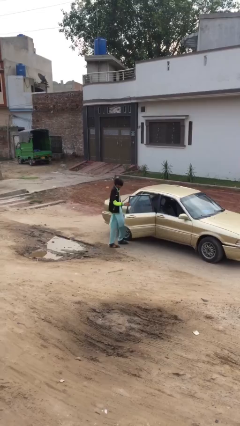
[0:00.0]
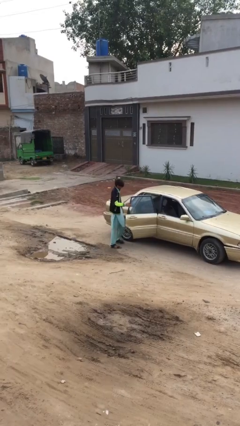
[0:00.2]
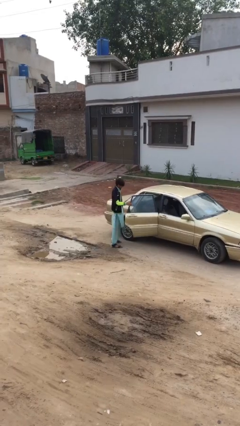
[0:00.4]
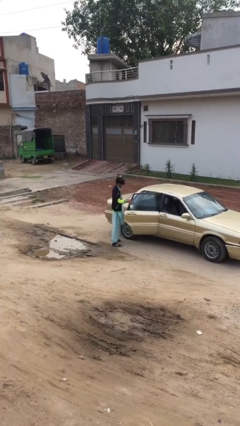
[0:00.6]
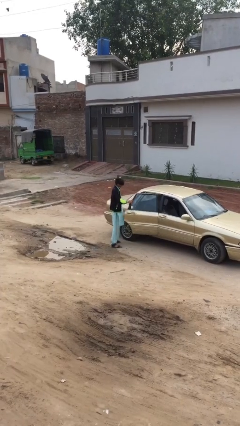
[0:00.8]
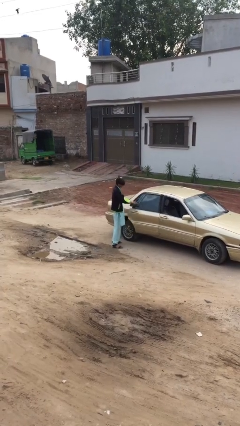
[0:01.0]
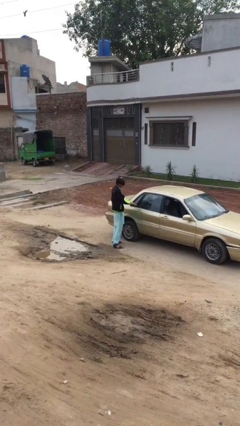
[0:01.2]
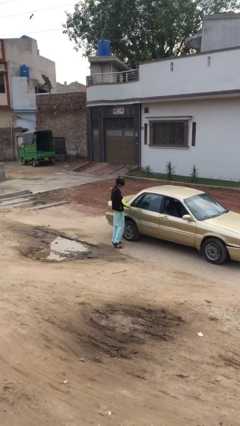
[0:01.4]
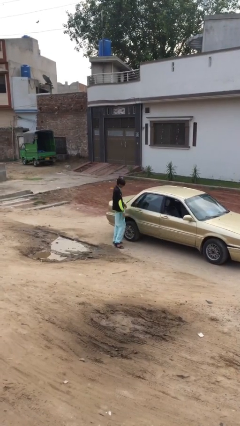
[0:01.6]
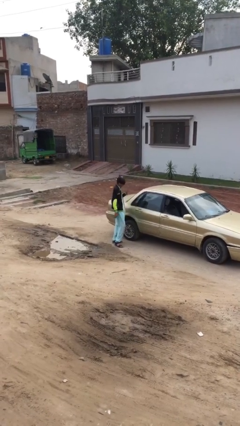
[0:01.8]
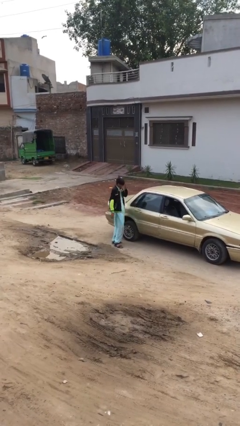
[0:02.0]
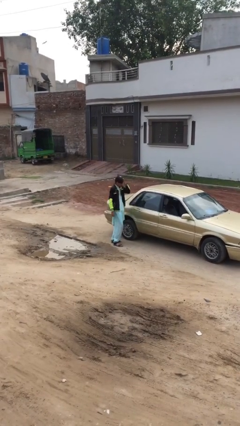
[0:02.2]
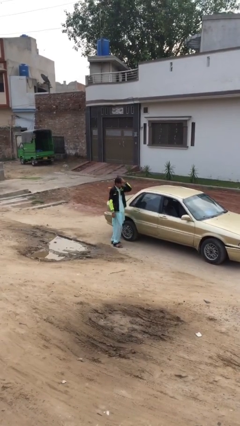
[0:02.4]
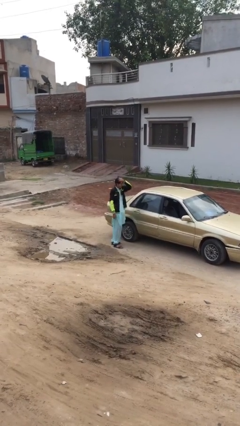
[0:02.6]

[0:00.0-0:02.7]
person closes car door

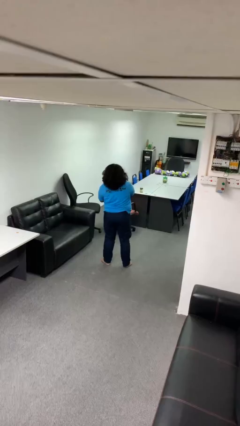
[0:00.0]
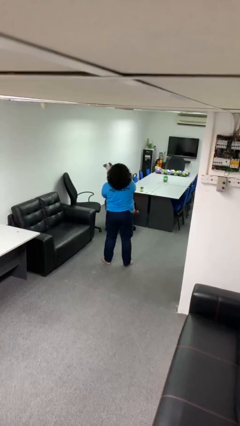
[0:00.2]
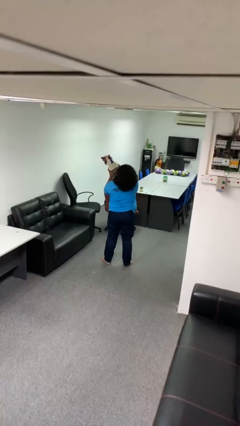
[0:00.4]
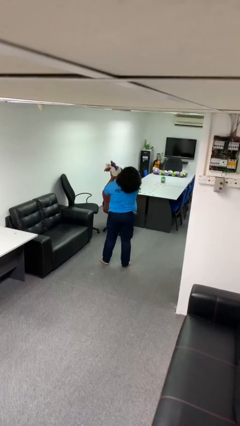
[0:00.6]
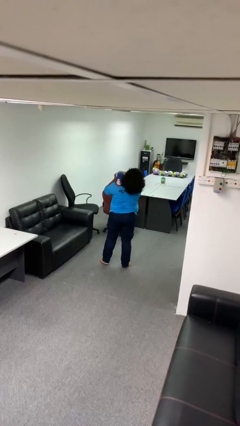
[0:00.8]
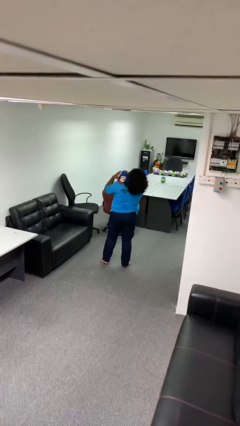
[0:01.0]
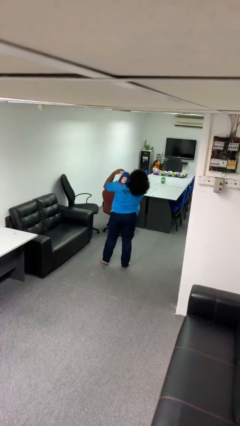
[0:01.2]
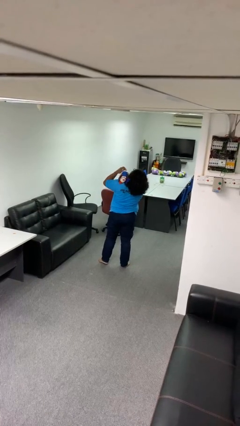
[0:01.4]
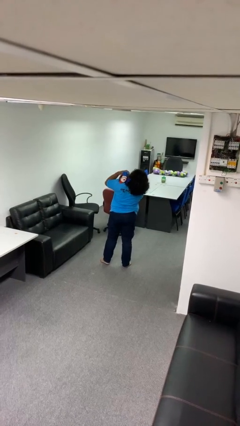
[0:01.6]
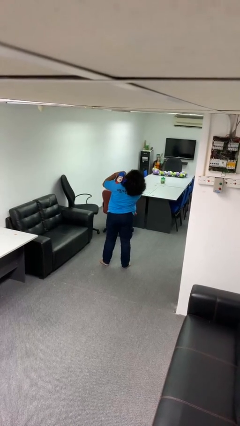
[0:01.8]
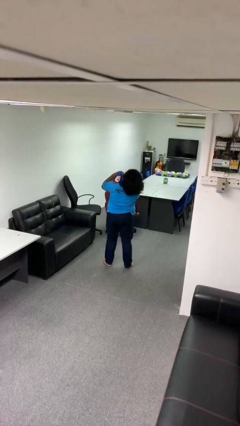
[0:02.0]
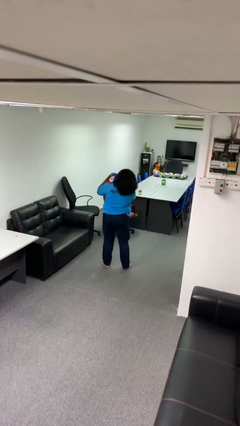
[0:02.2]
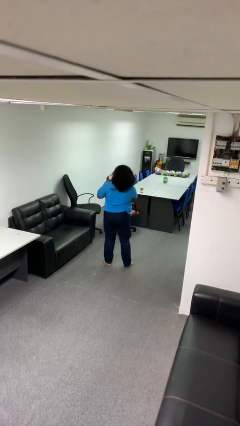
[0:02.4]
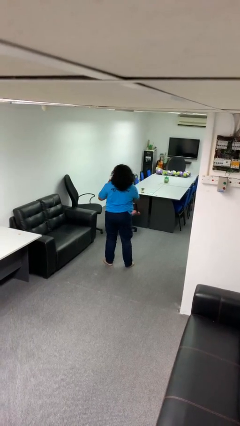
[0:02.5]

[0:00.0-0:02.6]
person hugs stuffed animal

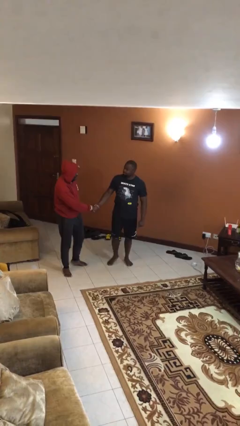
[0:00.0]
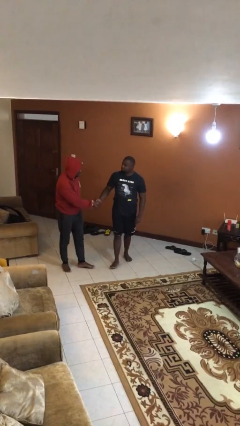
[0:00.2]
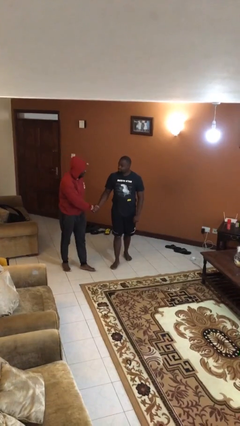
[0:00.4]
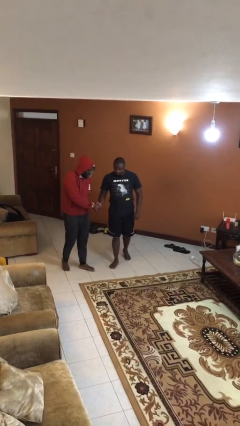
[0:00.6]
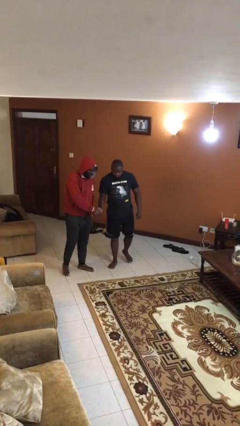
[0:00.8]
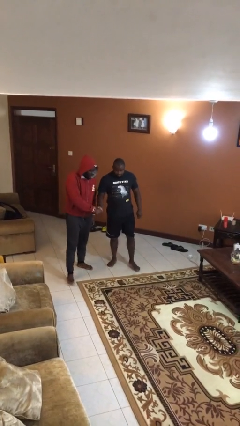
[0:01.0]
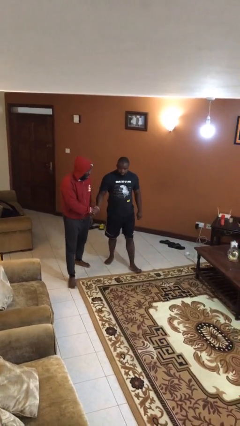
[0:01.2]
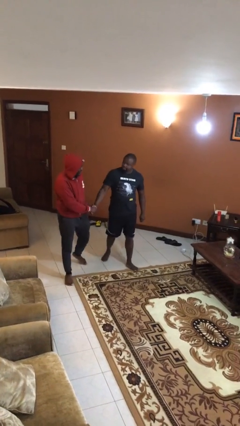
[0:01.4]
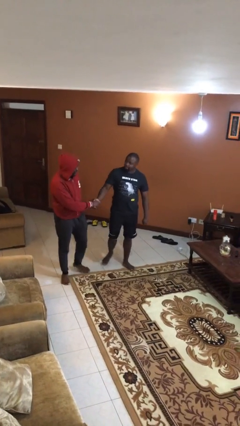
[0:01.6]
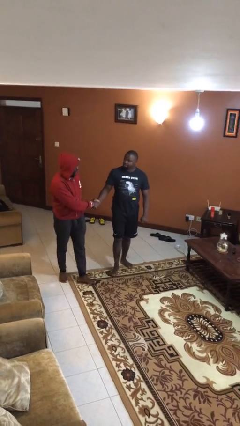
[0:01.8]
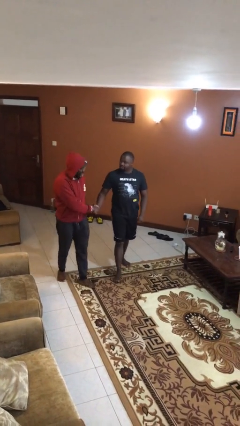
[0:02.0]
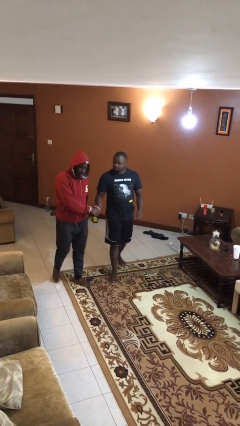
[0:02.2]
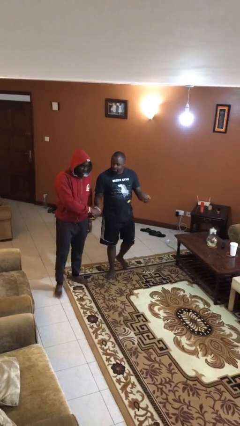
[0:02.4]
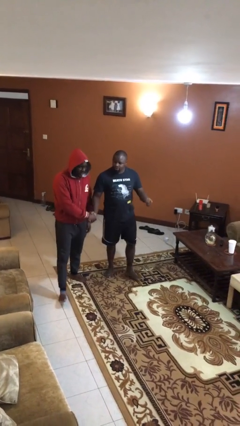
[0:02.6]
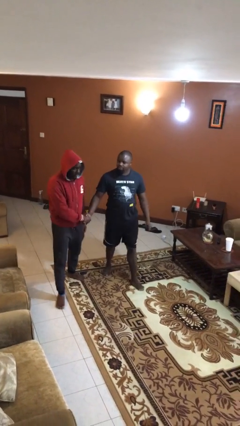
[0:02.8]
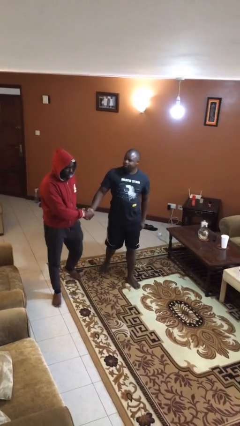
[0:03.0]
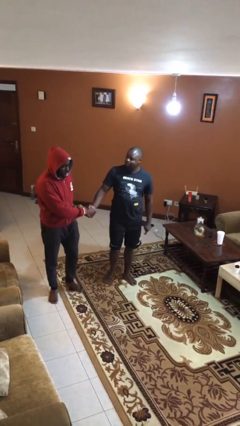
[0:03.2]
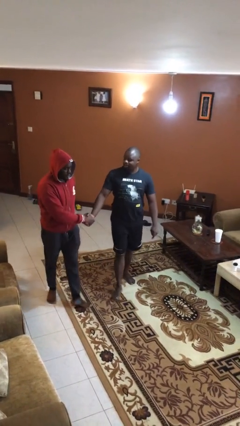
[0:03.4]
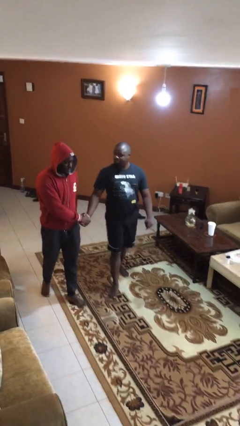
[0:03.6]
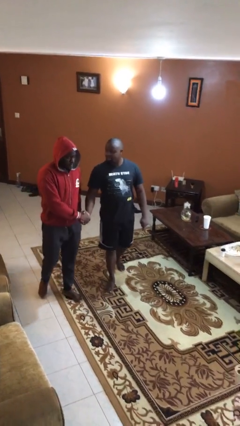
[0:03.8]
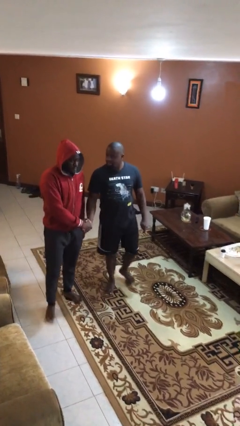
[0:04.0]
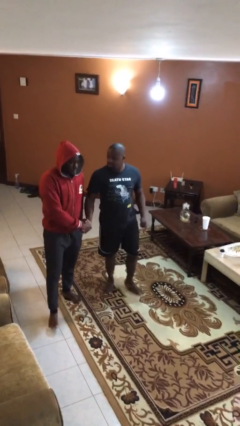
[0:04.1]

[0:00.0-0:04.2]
person holds hand

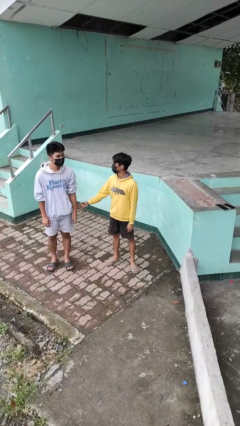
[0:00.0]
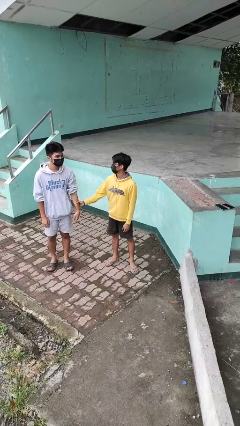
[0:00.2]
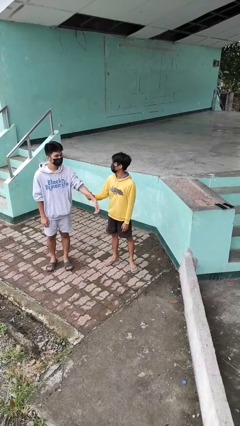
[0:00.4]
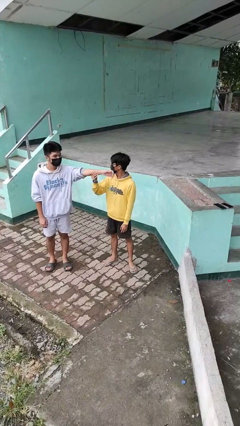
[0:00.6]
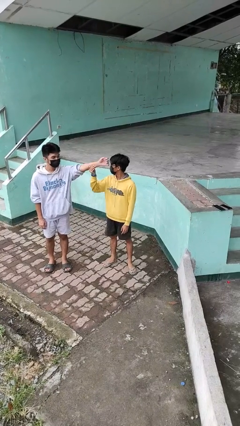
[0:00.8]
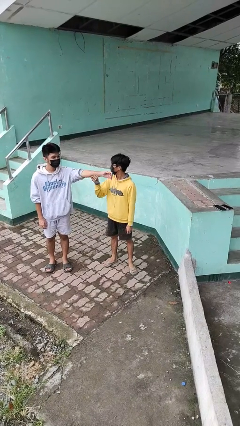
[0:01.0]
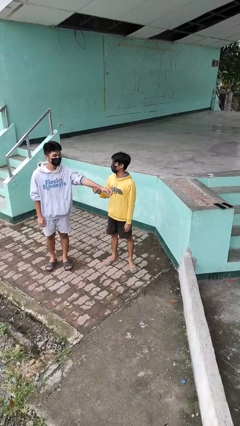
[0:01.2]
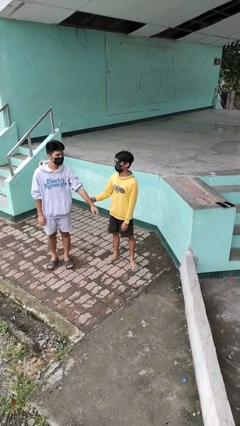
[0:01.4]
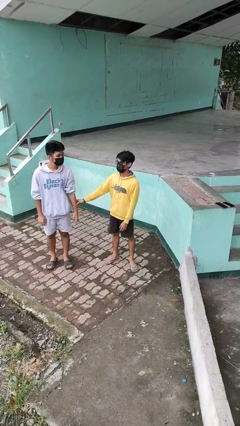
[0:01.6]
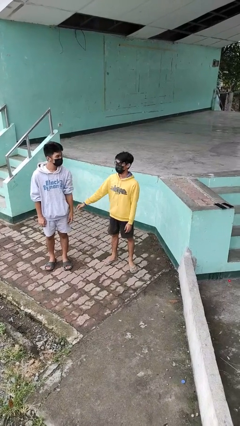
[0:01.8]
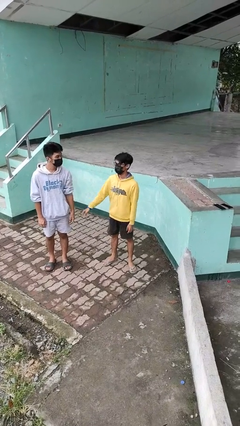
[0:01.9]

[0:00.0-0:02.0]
person grabs person by forearm

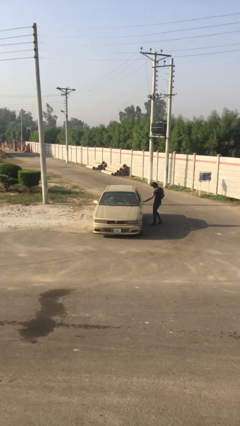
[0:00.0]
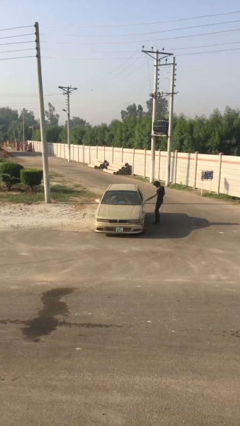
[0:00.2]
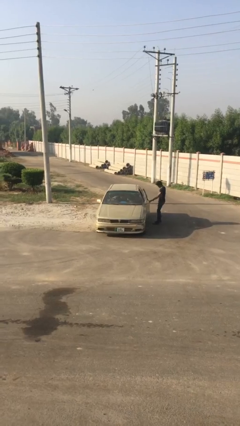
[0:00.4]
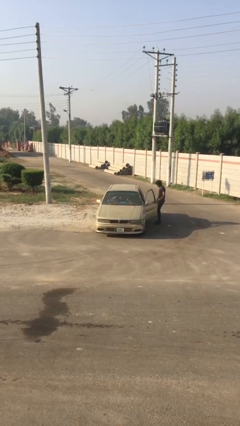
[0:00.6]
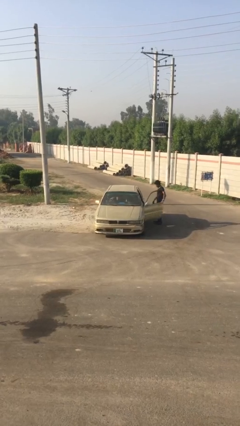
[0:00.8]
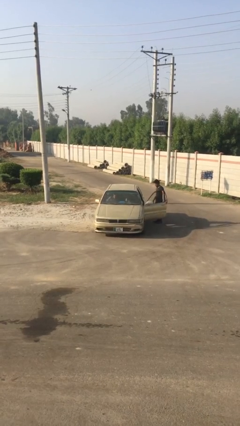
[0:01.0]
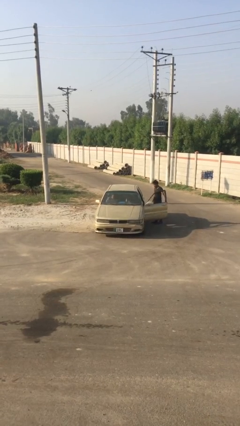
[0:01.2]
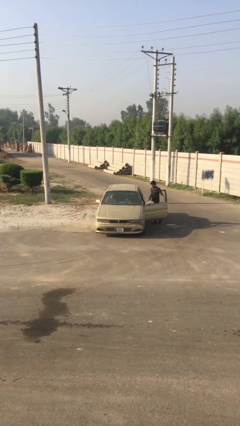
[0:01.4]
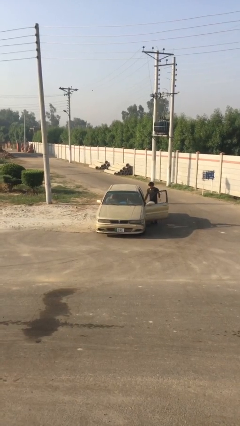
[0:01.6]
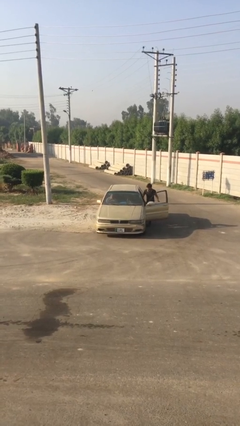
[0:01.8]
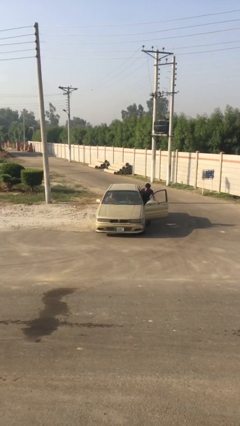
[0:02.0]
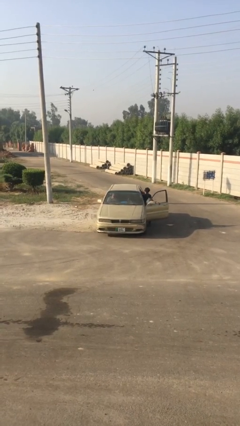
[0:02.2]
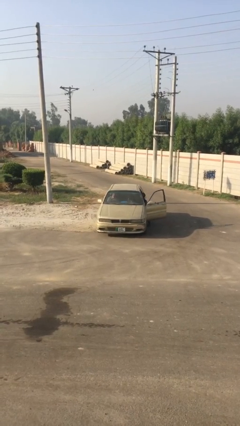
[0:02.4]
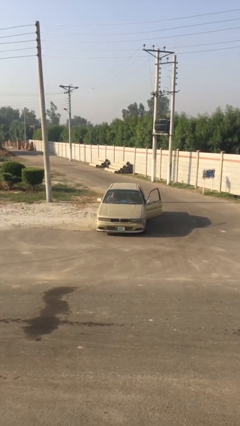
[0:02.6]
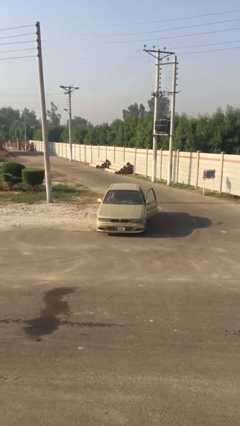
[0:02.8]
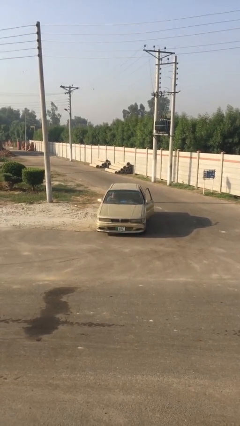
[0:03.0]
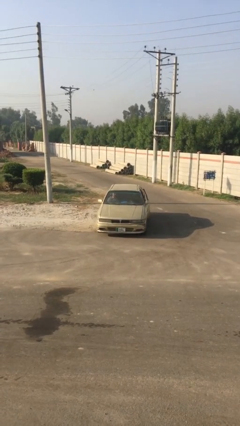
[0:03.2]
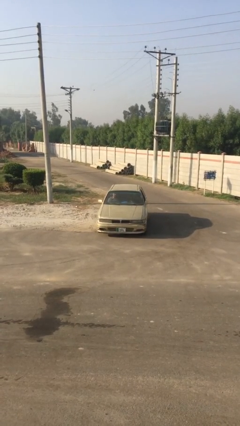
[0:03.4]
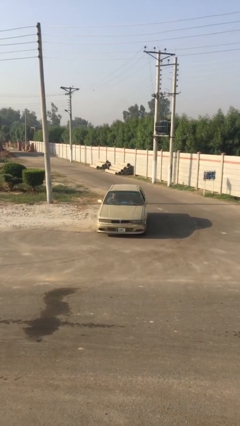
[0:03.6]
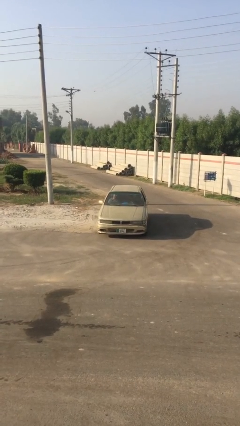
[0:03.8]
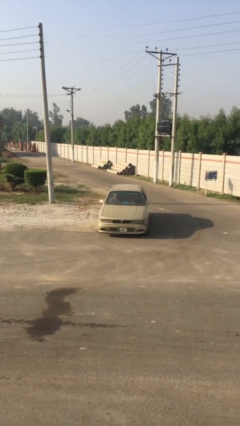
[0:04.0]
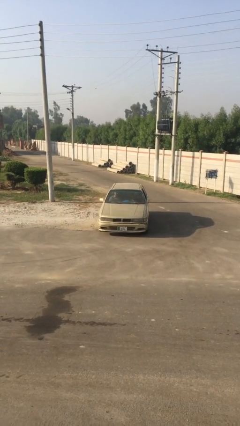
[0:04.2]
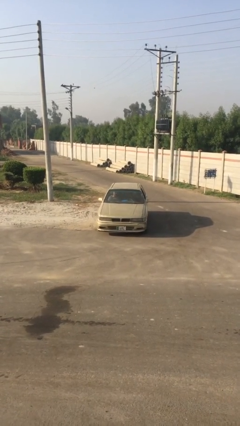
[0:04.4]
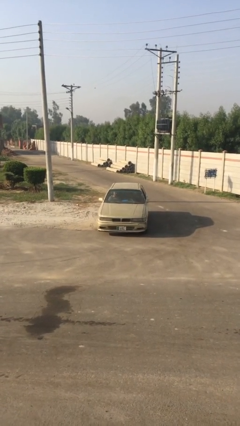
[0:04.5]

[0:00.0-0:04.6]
car picks up person

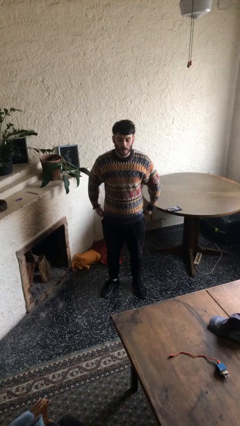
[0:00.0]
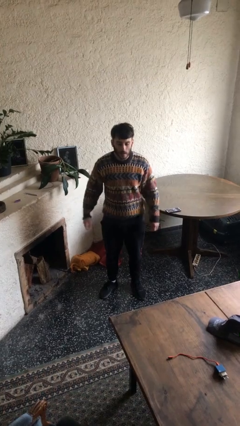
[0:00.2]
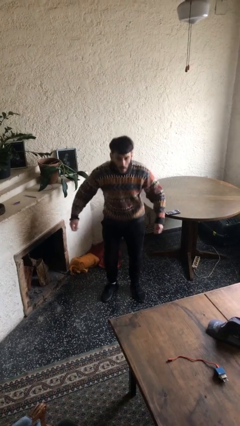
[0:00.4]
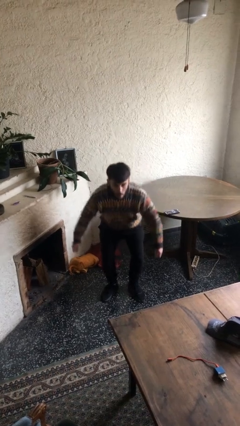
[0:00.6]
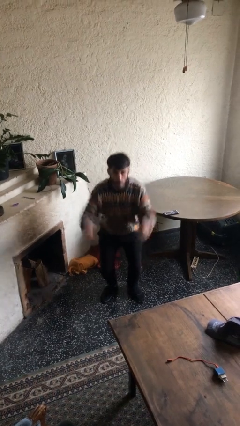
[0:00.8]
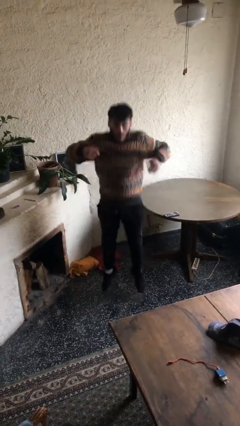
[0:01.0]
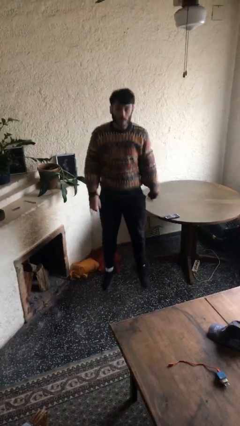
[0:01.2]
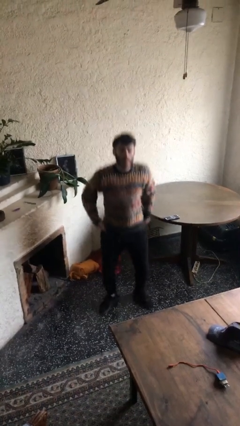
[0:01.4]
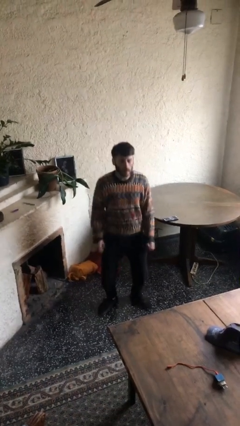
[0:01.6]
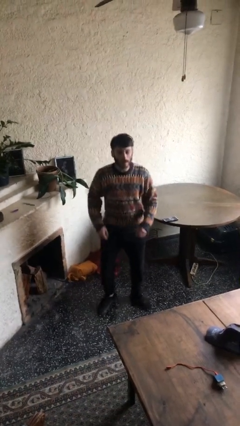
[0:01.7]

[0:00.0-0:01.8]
person jumps
